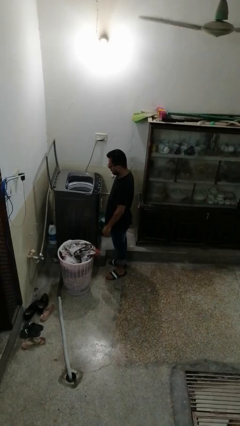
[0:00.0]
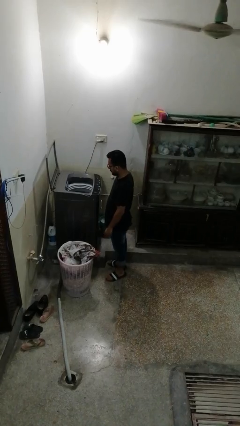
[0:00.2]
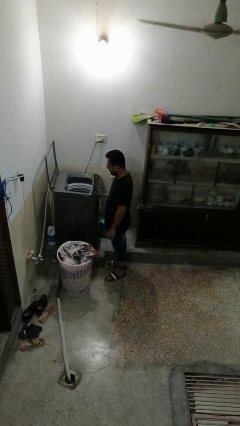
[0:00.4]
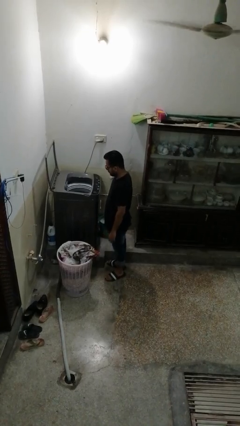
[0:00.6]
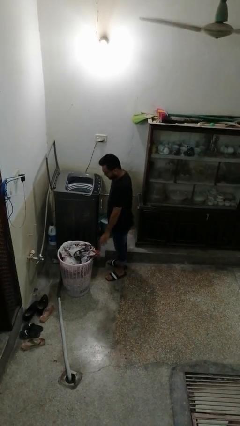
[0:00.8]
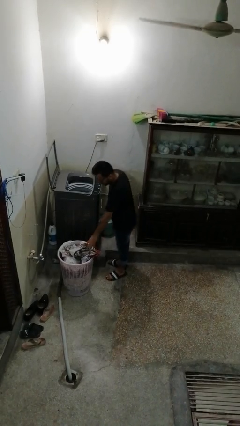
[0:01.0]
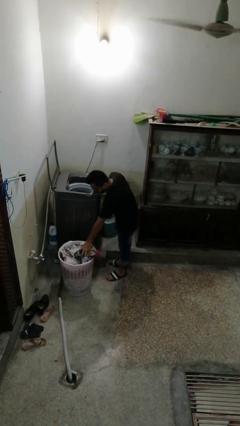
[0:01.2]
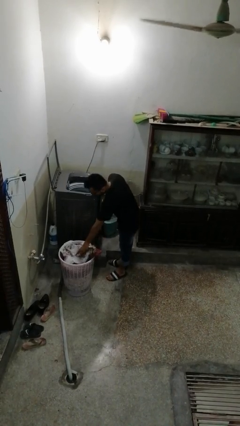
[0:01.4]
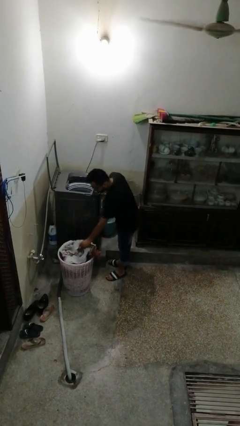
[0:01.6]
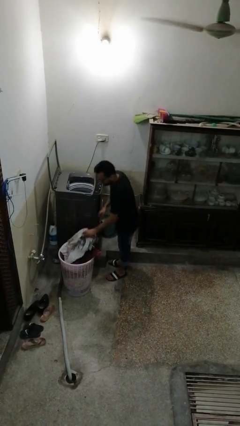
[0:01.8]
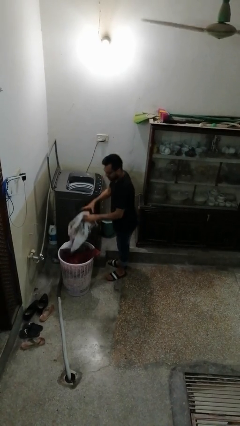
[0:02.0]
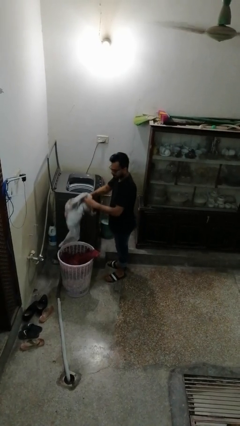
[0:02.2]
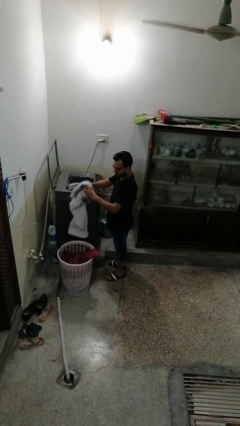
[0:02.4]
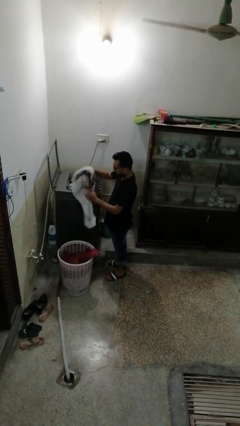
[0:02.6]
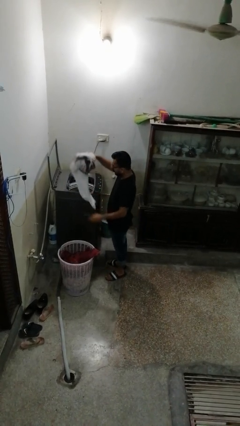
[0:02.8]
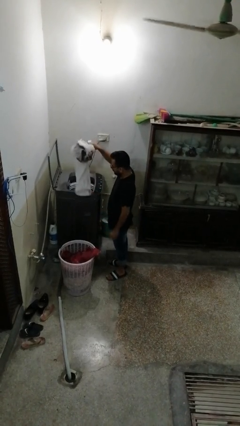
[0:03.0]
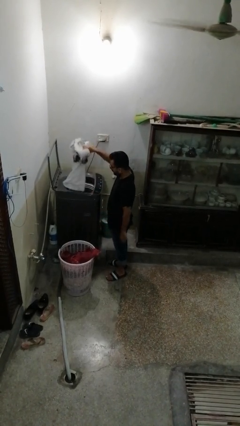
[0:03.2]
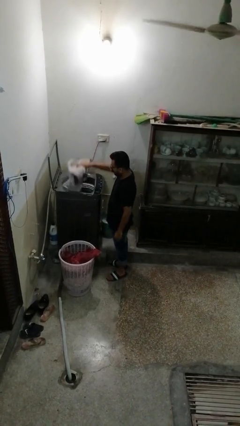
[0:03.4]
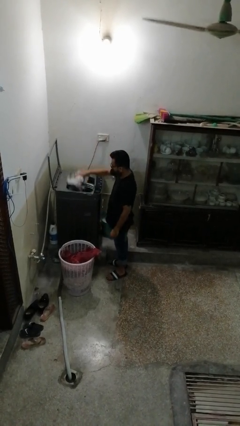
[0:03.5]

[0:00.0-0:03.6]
person loads clotheswasher

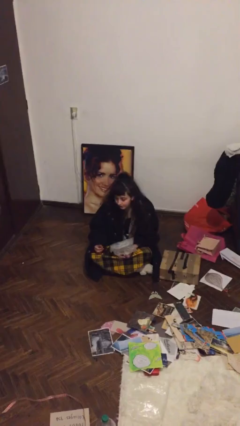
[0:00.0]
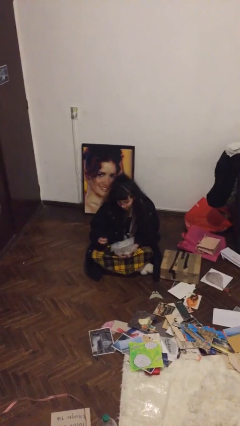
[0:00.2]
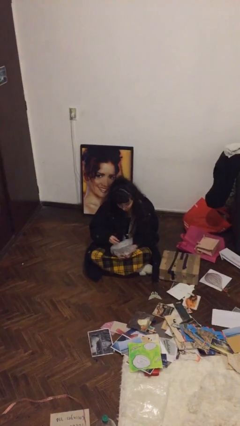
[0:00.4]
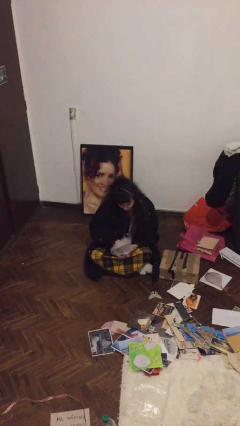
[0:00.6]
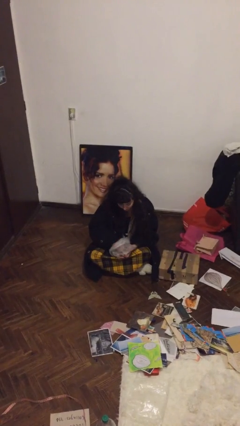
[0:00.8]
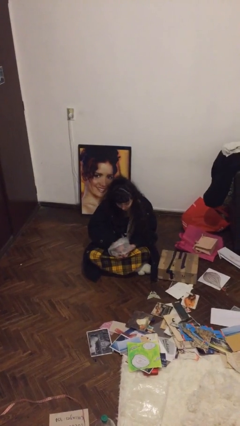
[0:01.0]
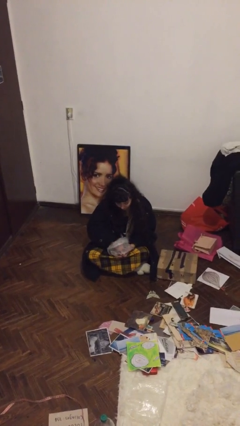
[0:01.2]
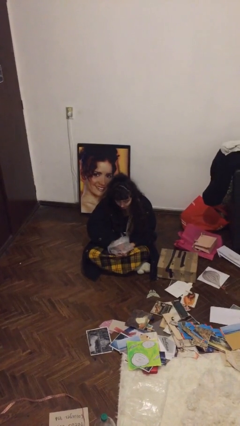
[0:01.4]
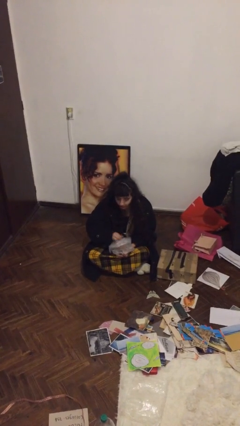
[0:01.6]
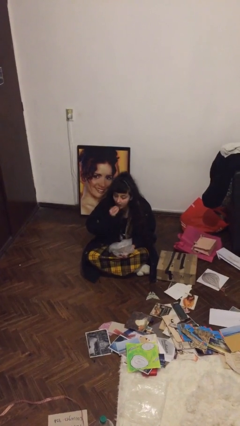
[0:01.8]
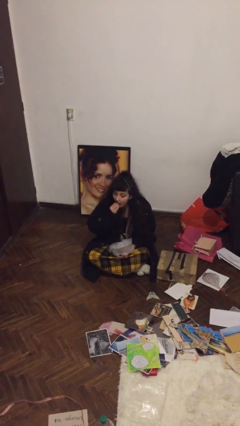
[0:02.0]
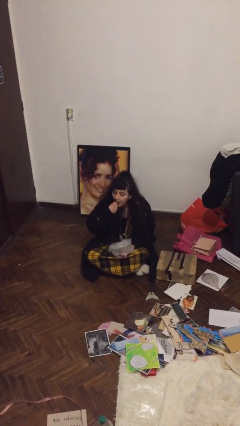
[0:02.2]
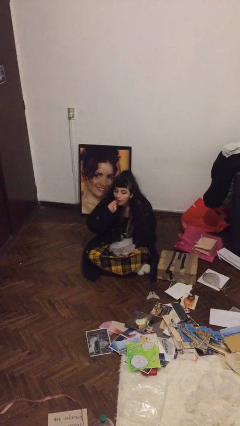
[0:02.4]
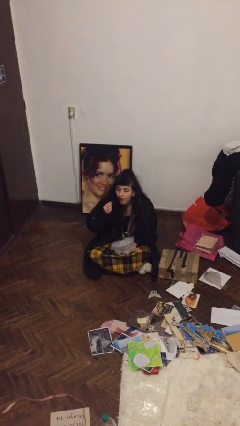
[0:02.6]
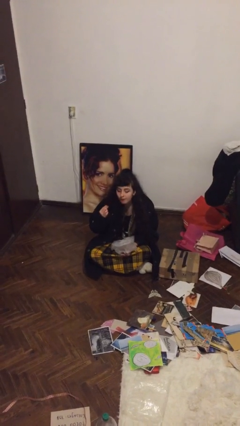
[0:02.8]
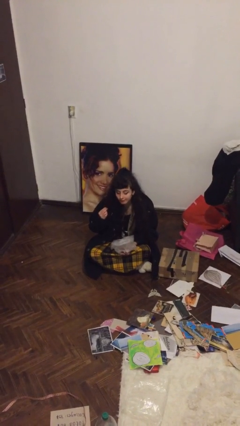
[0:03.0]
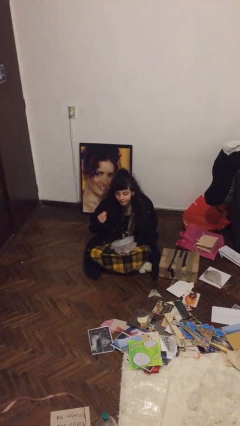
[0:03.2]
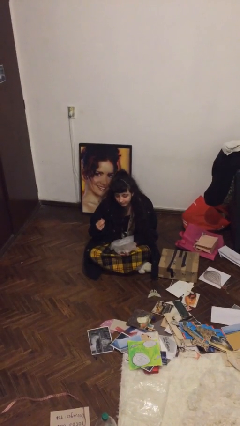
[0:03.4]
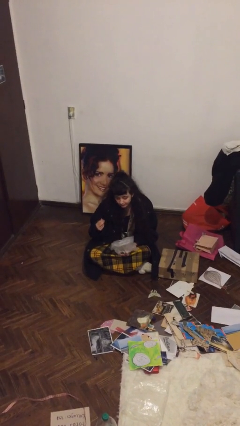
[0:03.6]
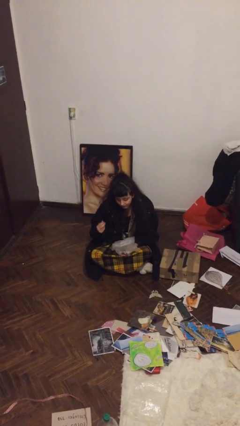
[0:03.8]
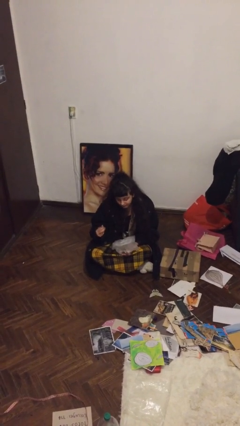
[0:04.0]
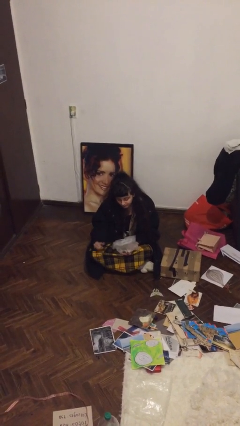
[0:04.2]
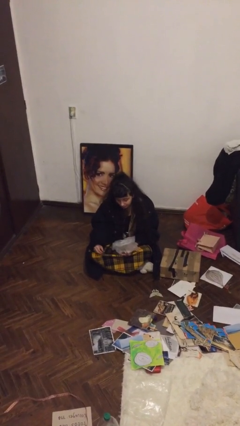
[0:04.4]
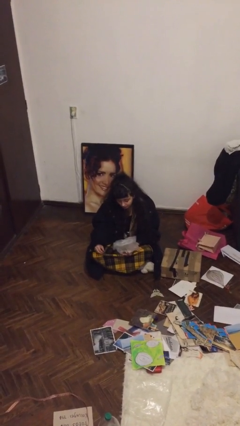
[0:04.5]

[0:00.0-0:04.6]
person eats snack from bag

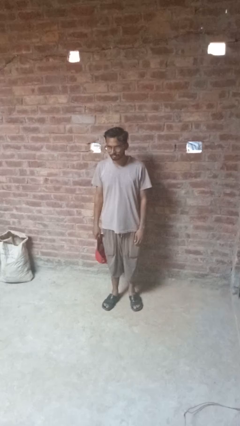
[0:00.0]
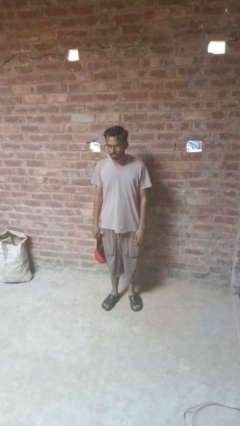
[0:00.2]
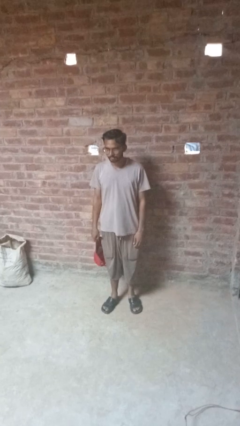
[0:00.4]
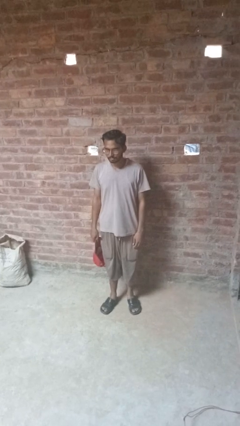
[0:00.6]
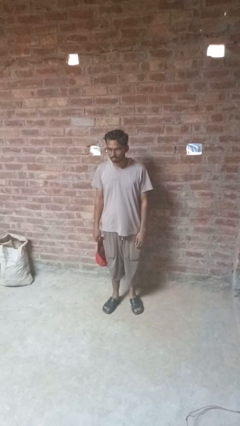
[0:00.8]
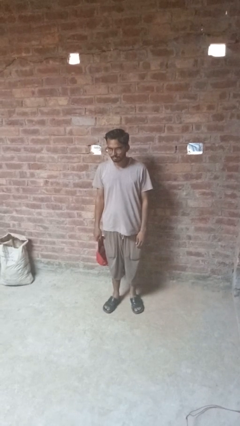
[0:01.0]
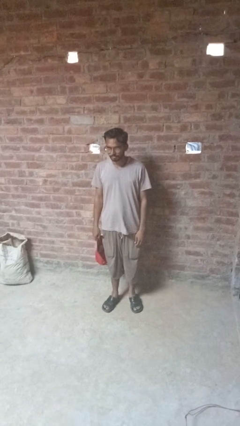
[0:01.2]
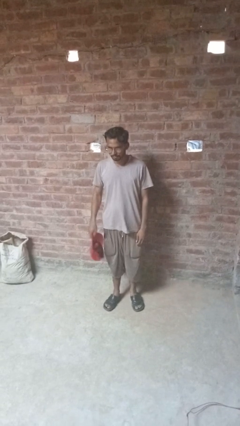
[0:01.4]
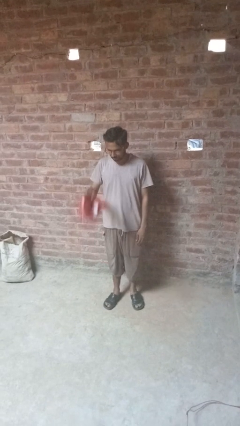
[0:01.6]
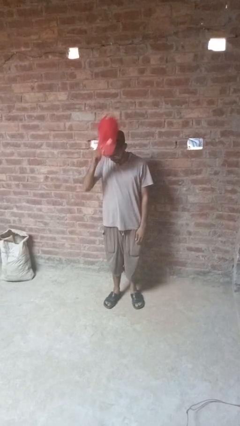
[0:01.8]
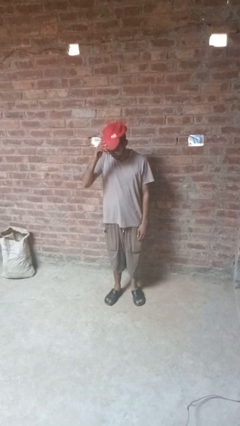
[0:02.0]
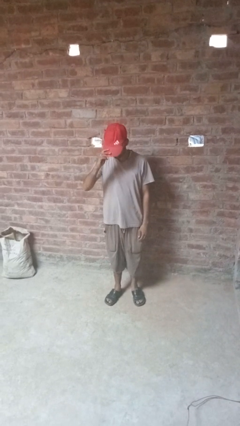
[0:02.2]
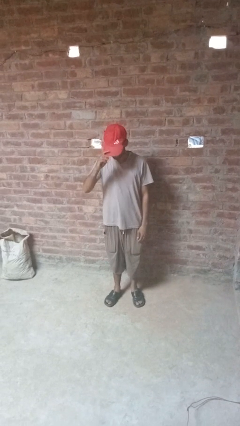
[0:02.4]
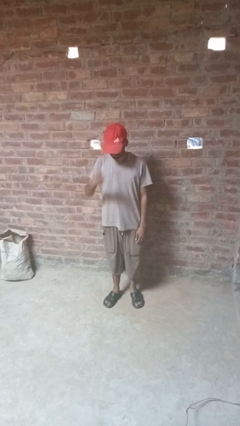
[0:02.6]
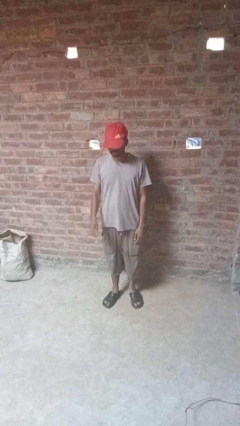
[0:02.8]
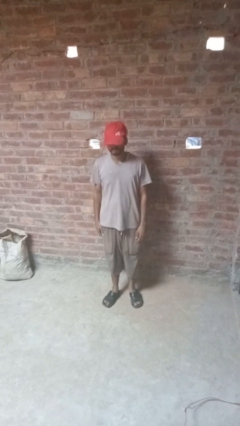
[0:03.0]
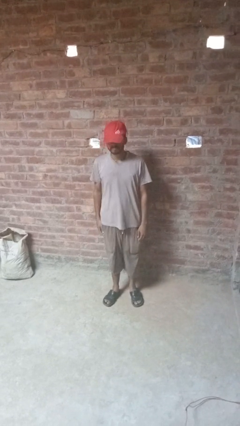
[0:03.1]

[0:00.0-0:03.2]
person puts on hat

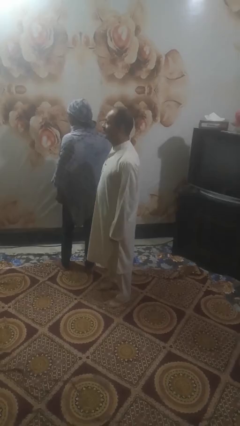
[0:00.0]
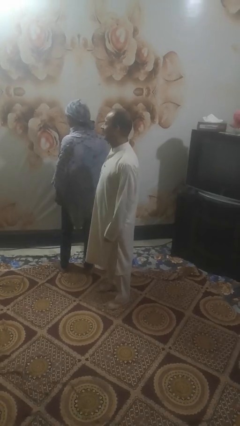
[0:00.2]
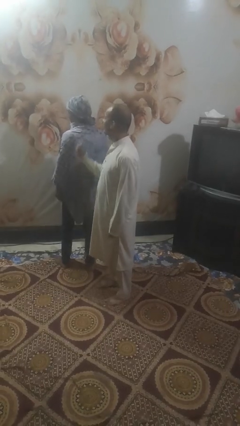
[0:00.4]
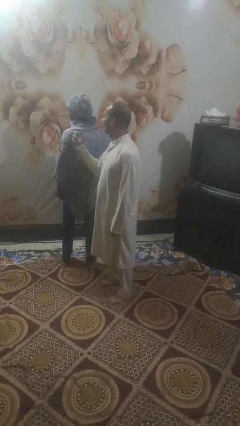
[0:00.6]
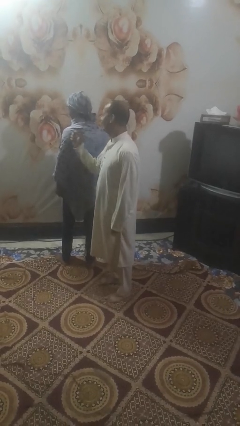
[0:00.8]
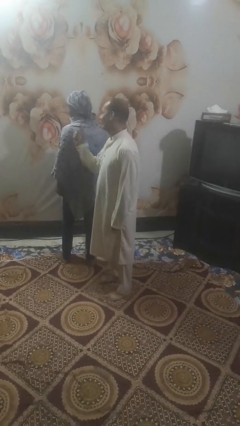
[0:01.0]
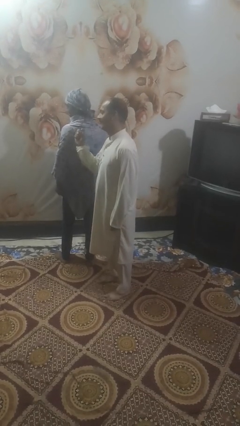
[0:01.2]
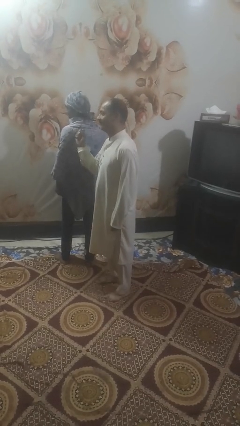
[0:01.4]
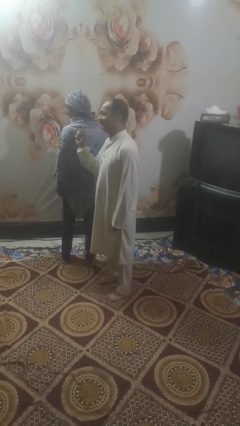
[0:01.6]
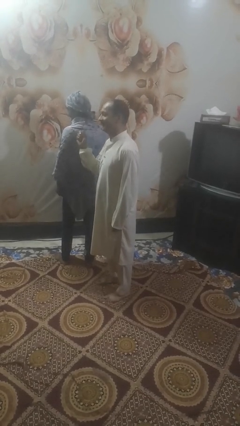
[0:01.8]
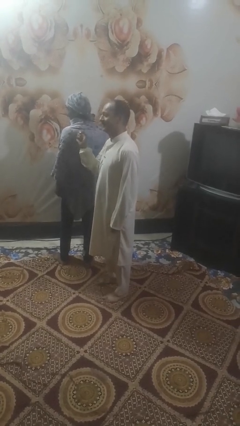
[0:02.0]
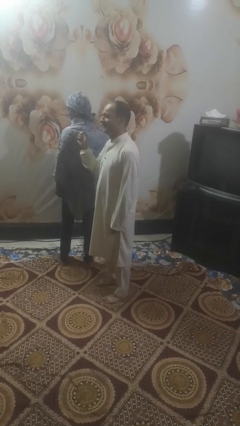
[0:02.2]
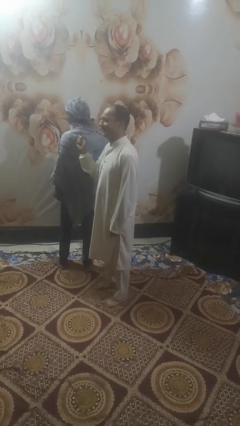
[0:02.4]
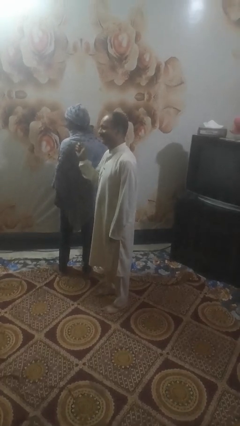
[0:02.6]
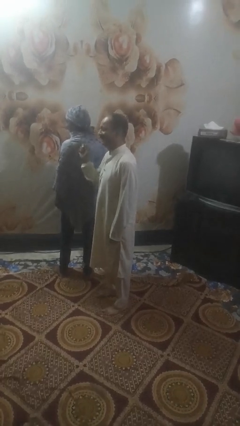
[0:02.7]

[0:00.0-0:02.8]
person touches back of person

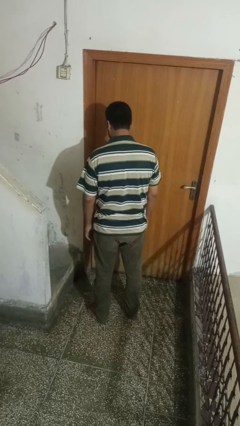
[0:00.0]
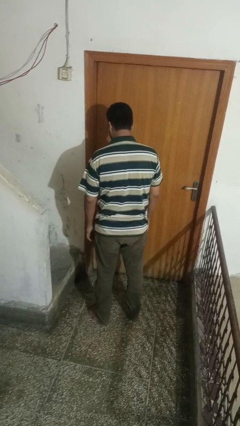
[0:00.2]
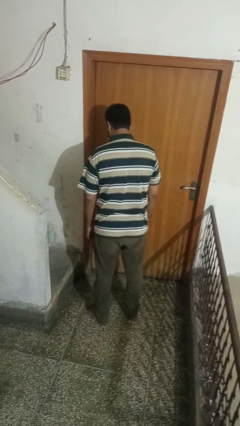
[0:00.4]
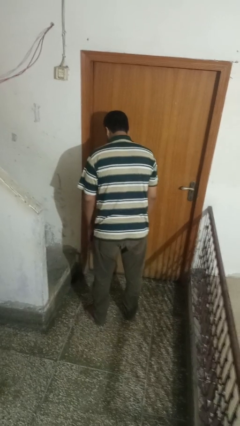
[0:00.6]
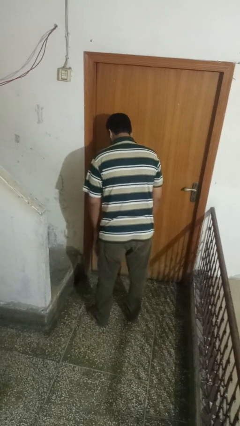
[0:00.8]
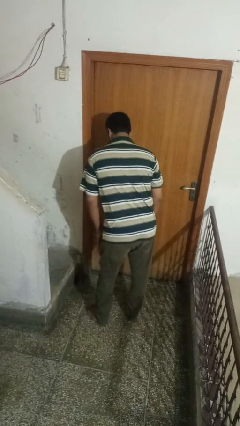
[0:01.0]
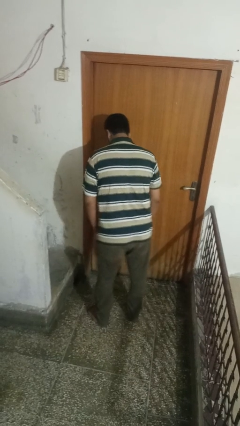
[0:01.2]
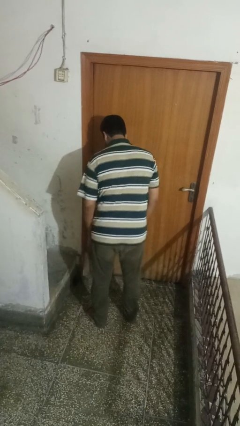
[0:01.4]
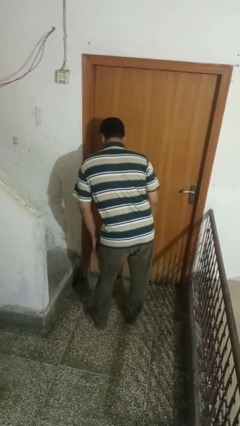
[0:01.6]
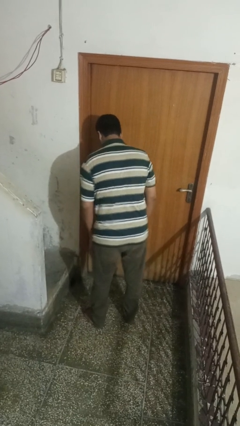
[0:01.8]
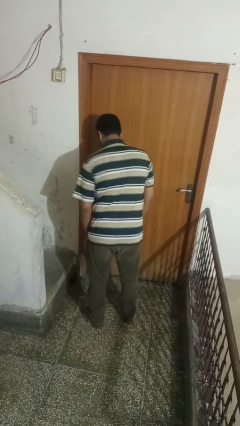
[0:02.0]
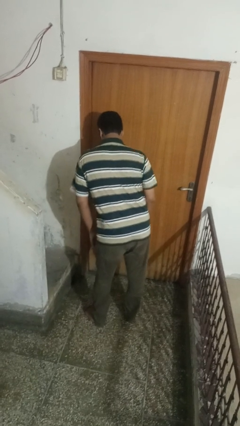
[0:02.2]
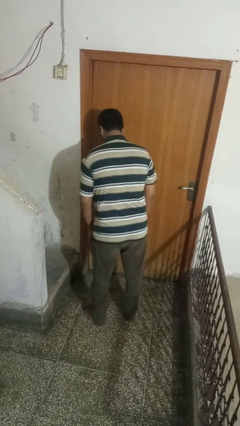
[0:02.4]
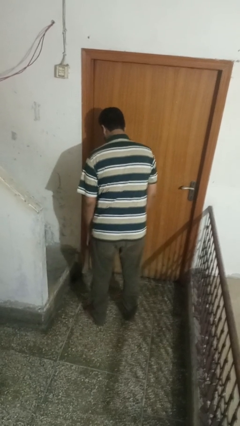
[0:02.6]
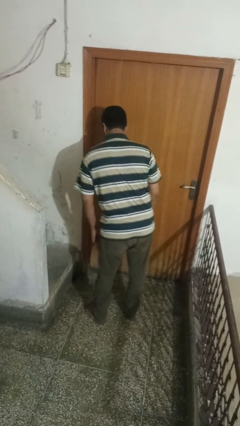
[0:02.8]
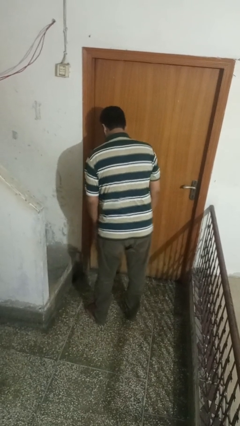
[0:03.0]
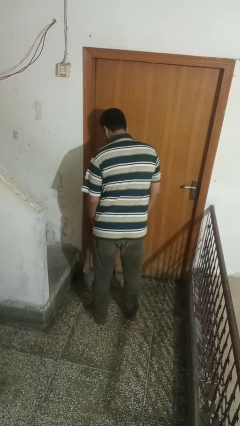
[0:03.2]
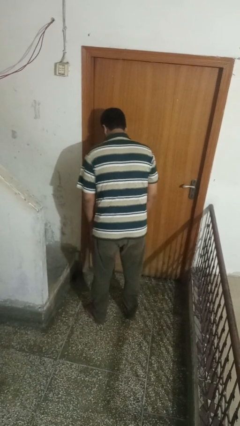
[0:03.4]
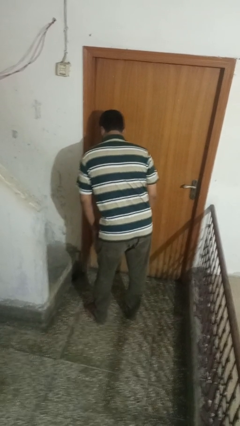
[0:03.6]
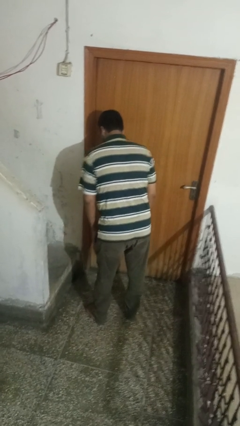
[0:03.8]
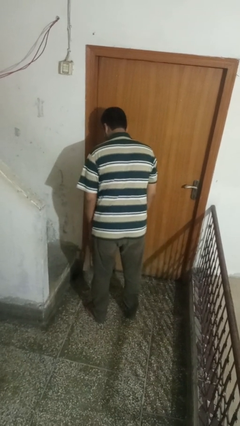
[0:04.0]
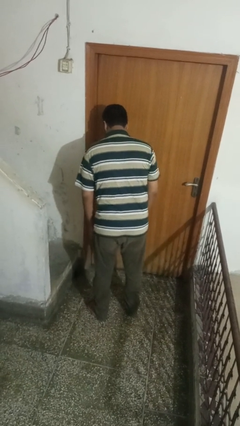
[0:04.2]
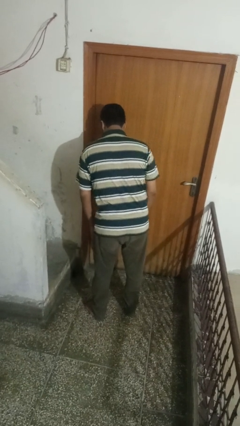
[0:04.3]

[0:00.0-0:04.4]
person wiggles hips
